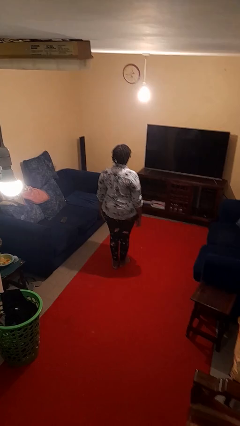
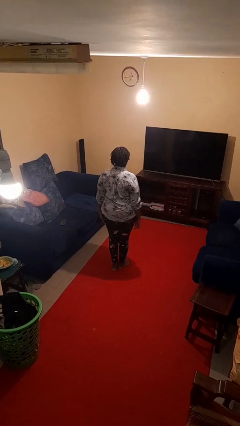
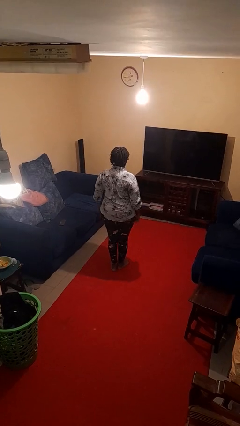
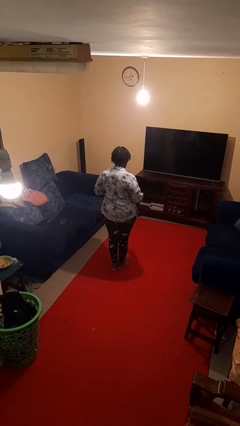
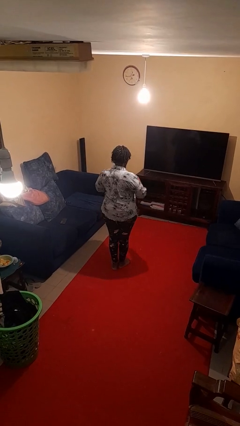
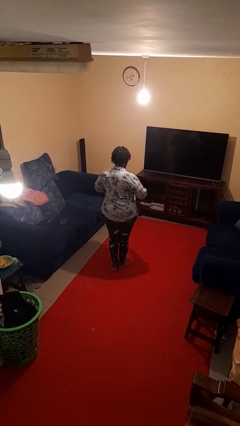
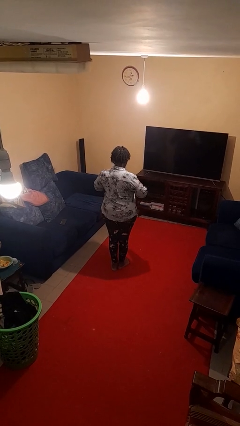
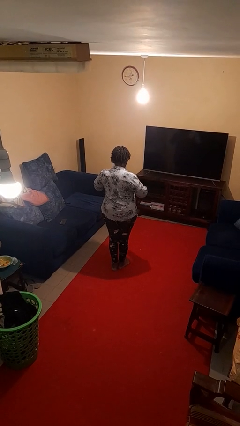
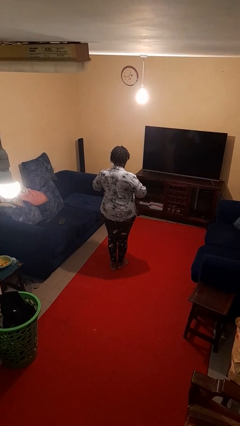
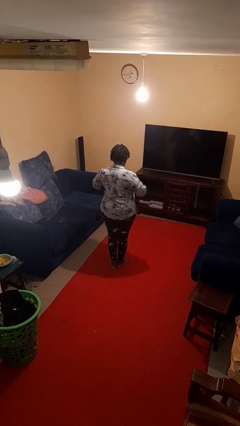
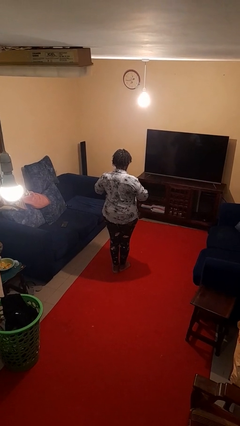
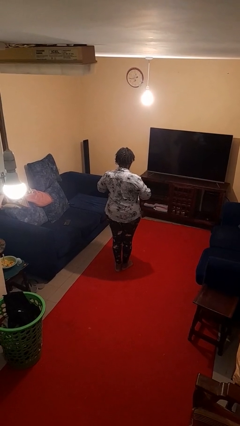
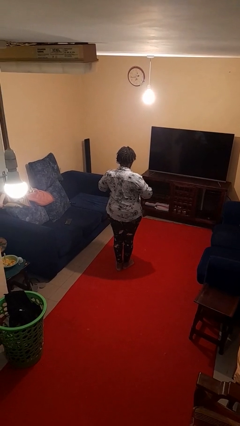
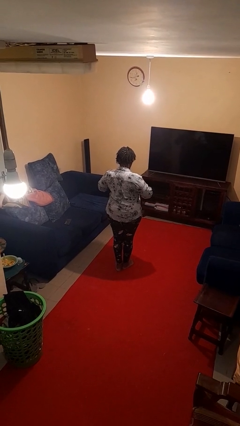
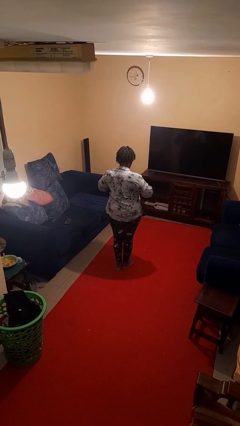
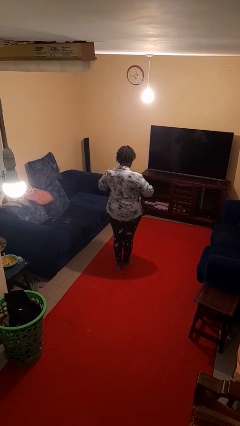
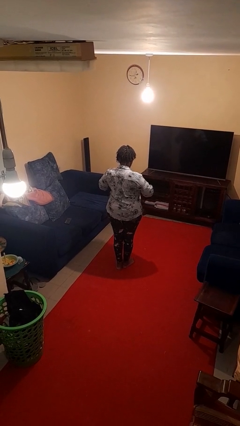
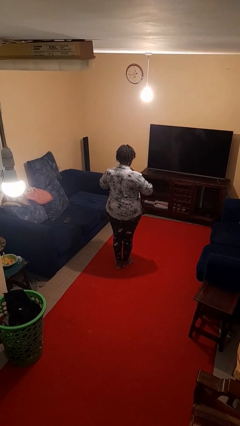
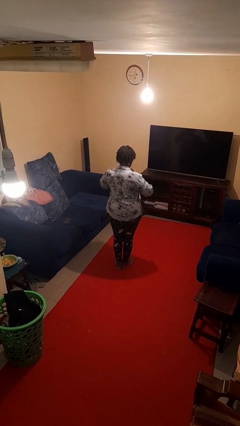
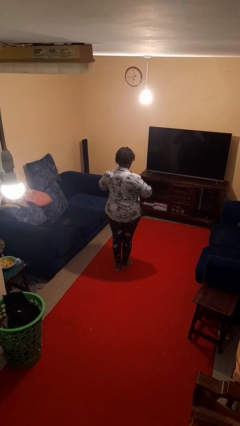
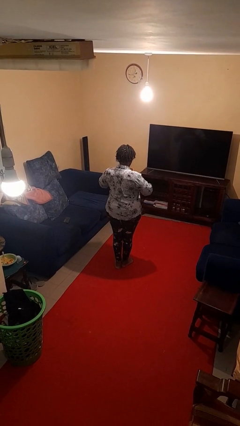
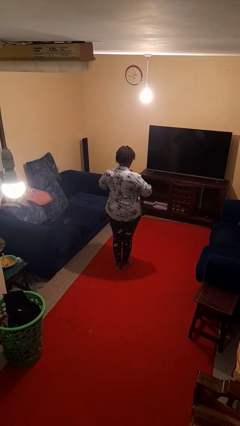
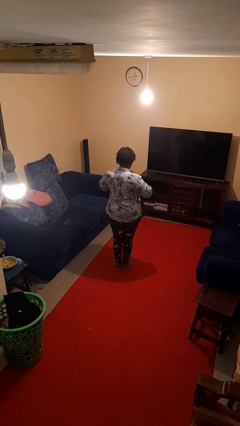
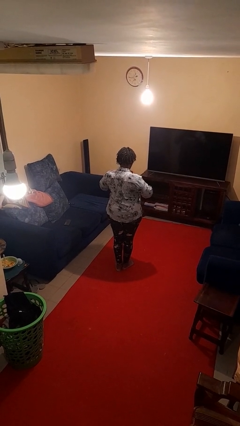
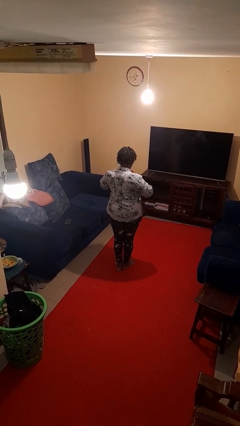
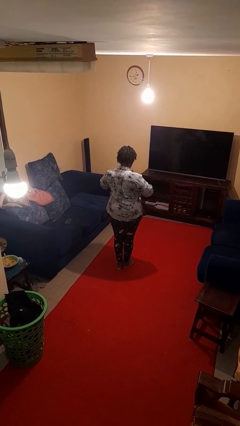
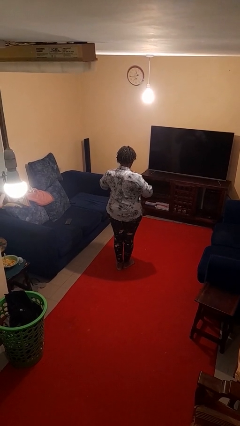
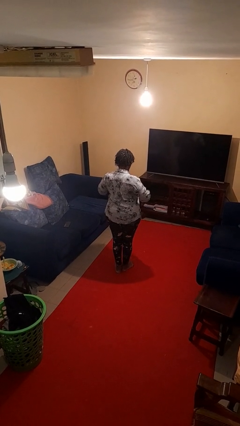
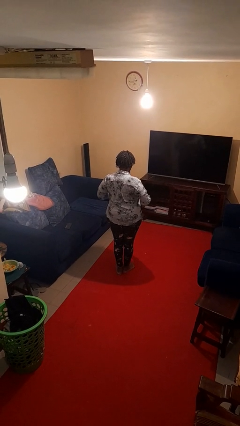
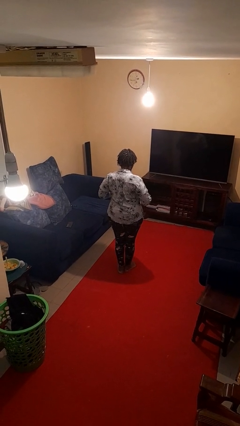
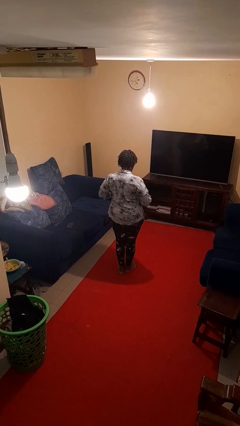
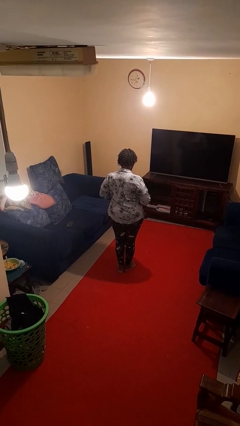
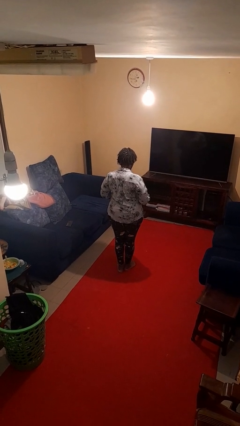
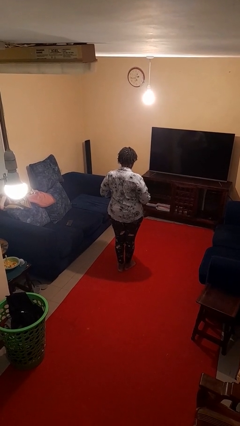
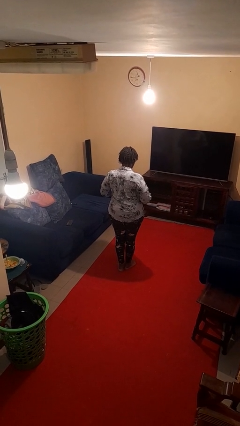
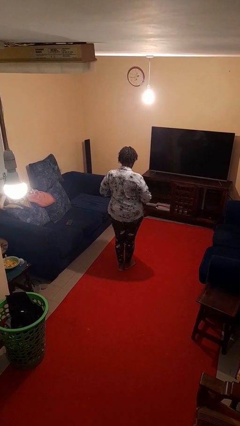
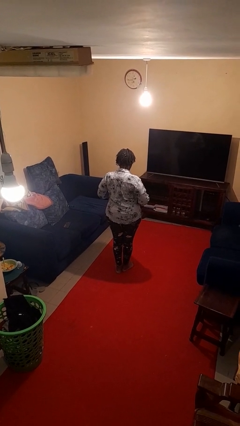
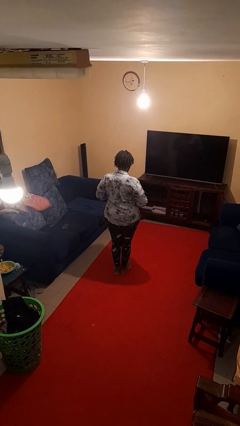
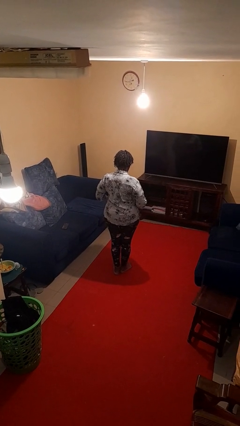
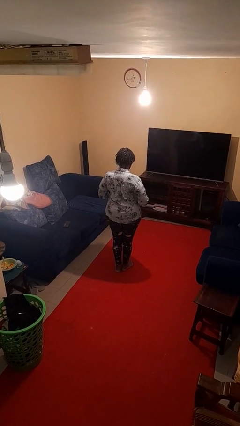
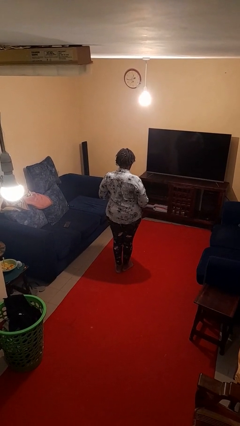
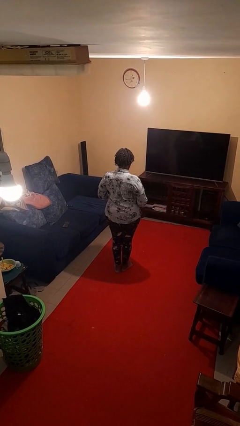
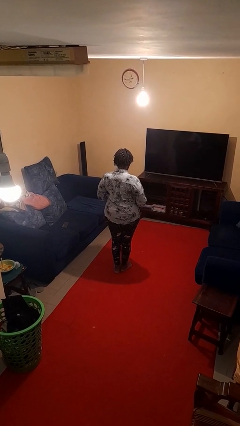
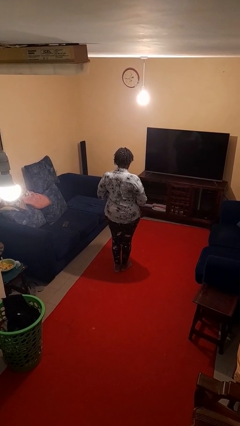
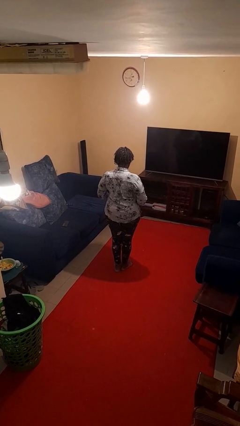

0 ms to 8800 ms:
person buttons shirt

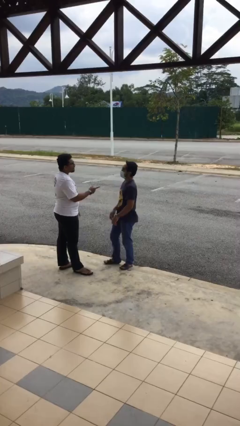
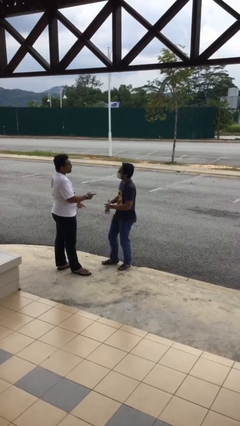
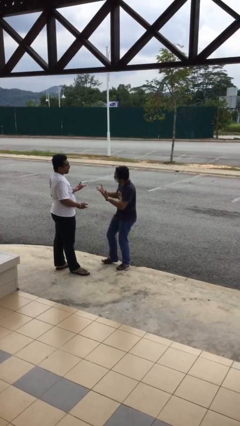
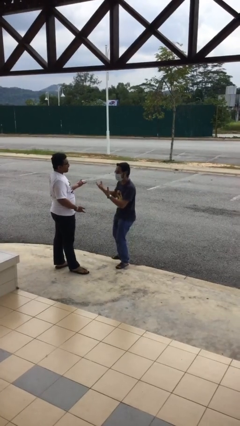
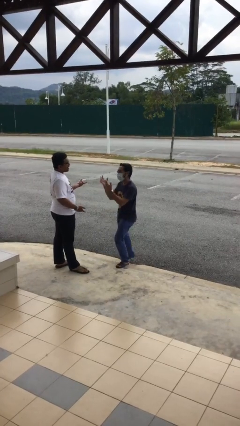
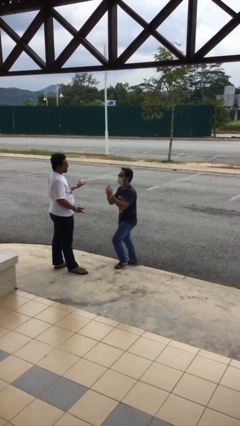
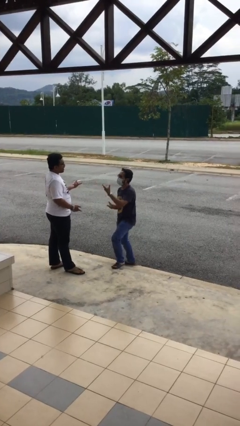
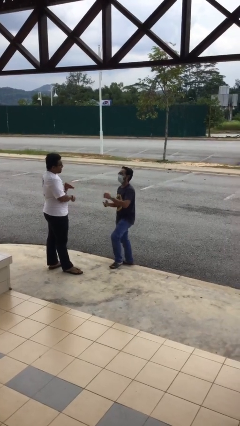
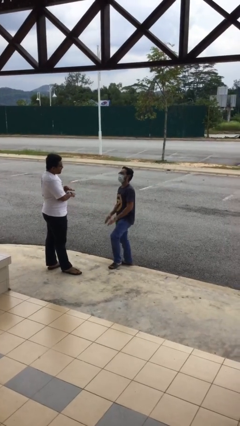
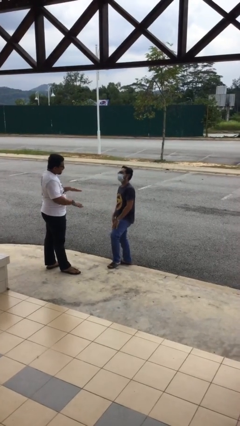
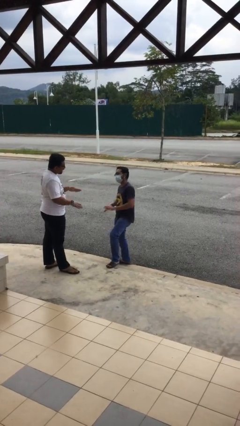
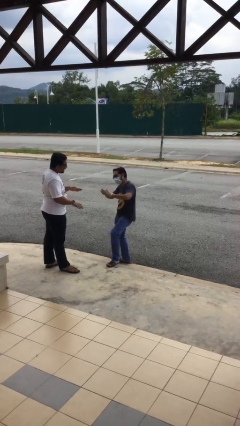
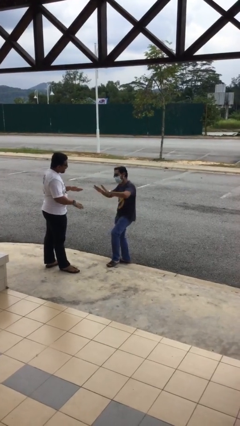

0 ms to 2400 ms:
person talks to person

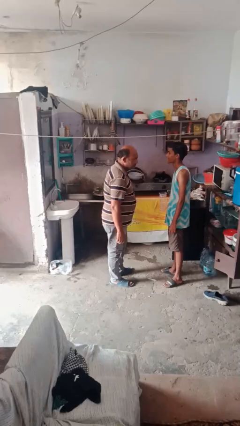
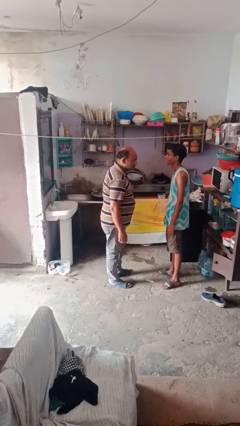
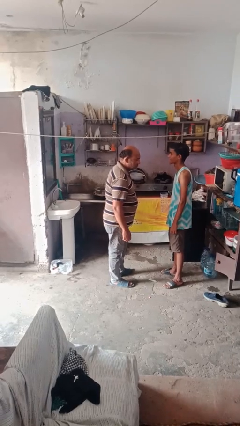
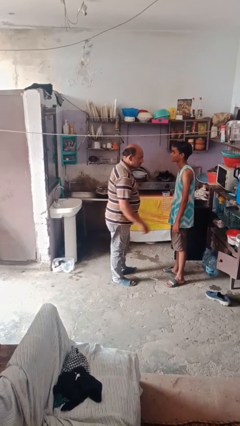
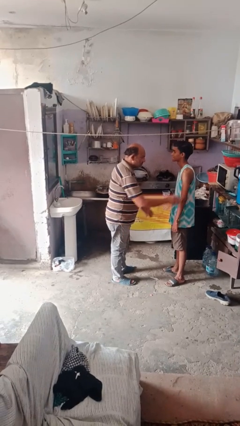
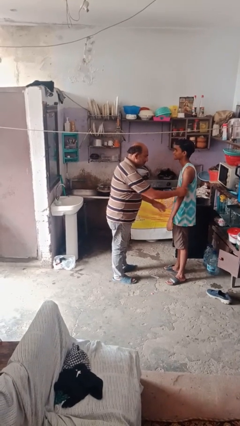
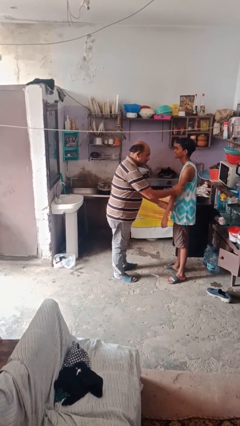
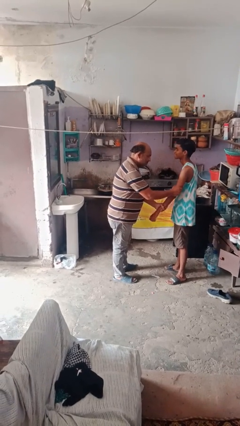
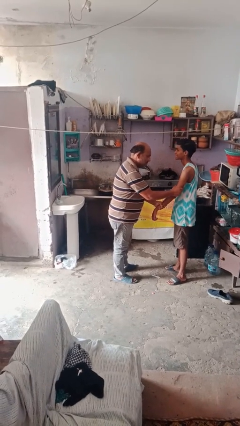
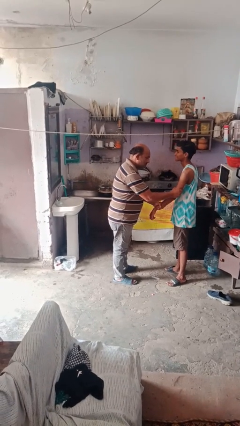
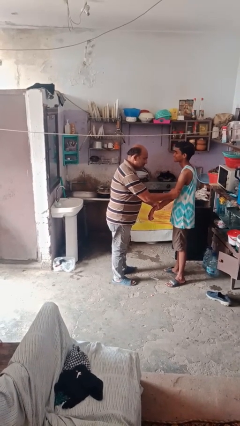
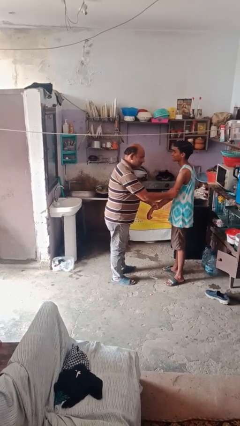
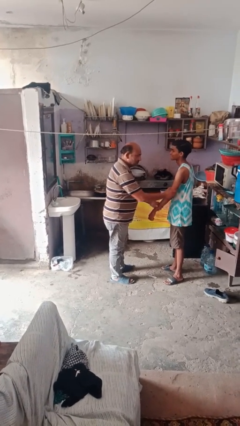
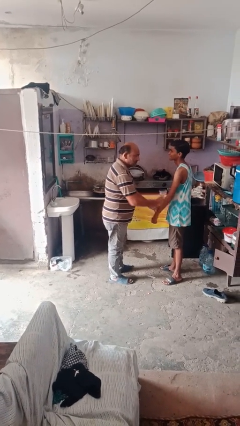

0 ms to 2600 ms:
person grabs person by forearm

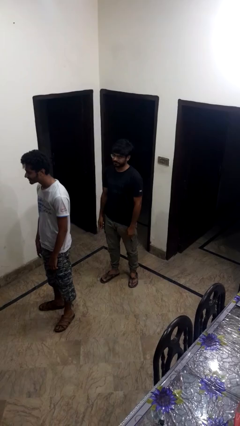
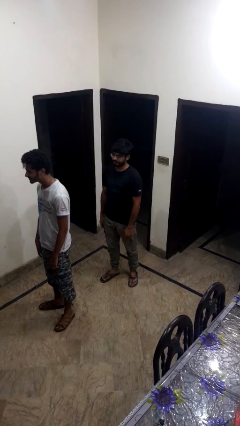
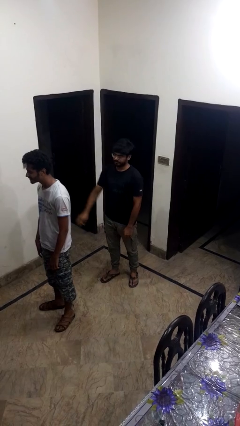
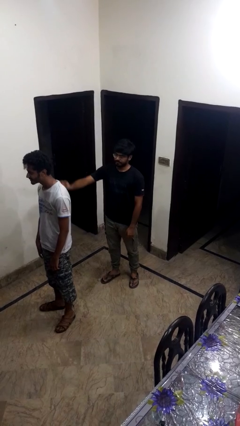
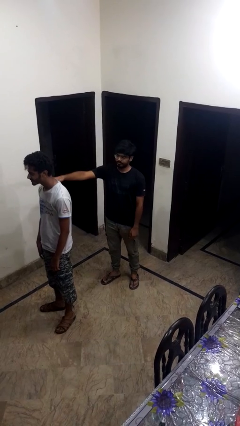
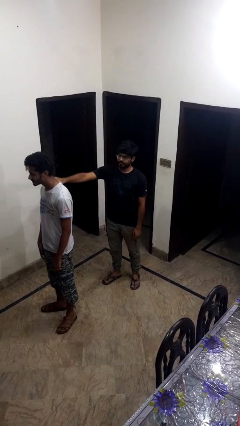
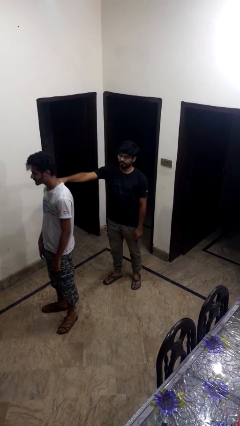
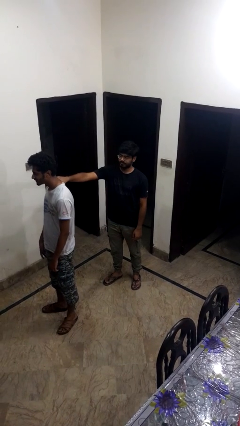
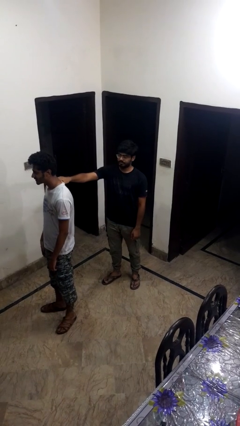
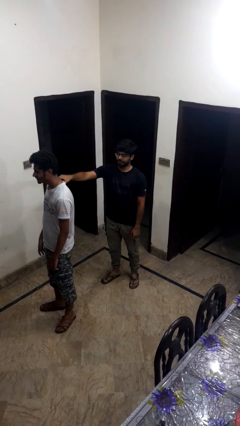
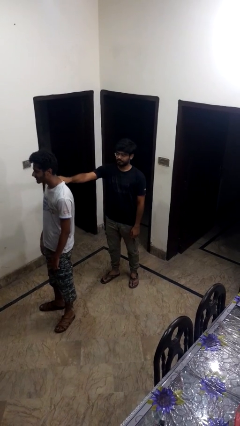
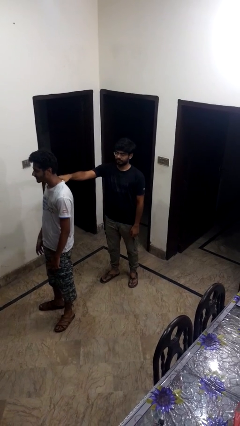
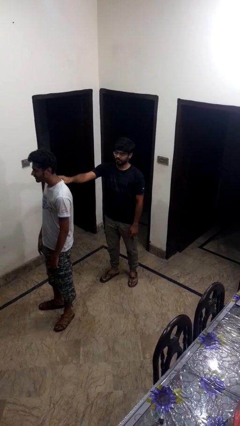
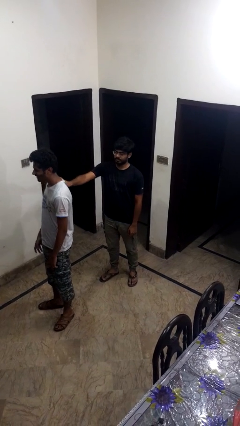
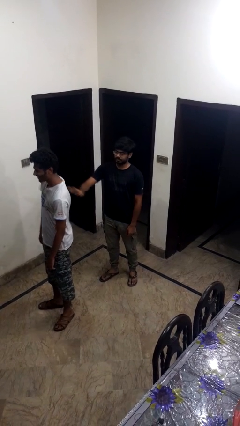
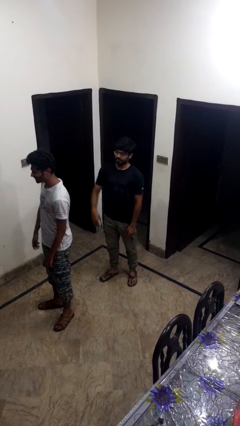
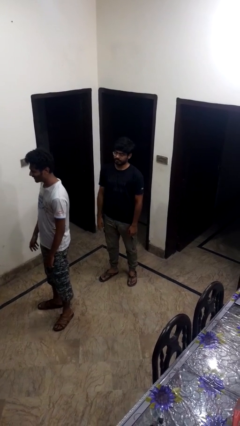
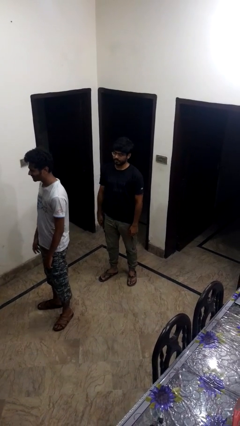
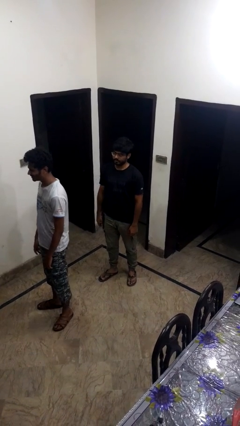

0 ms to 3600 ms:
person touches back of person

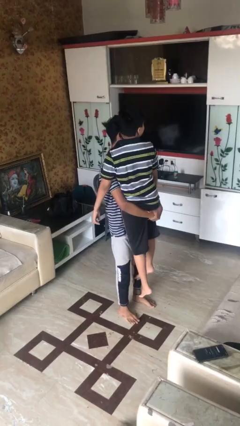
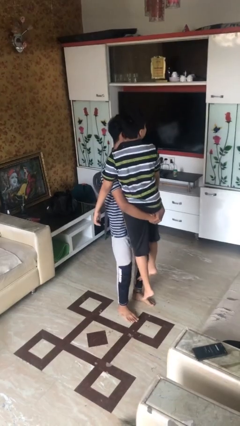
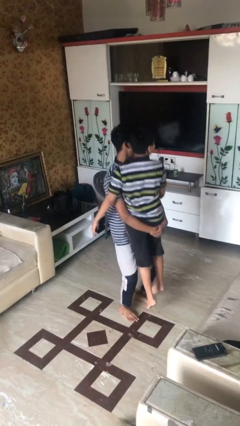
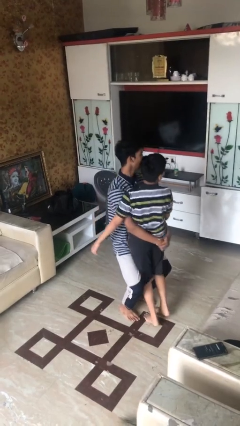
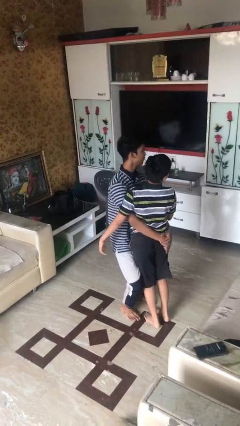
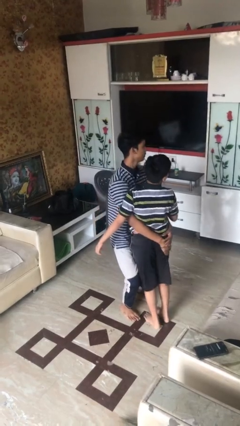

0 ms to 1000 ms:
person puts down person
